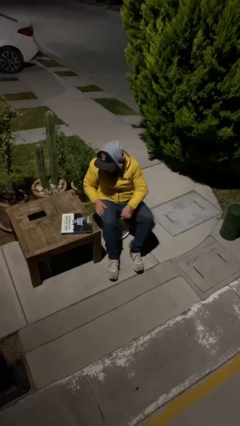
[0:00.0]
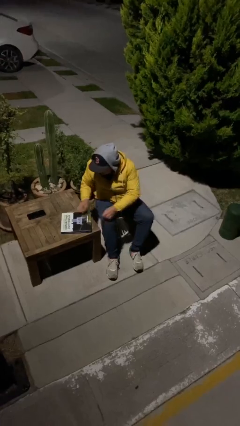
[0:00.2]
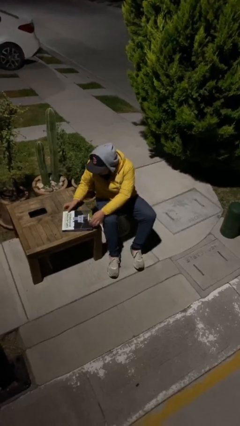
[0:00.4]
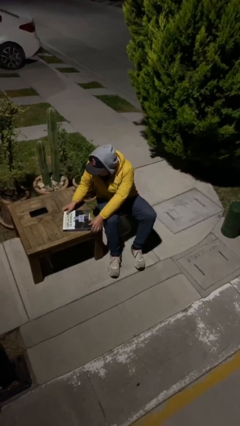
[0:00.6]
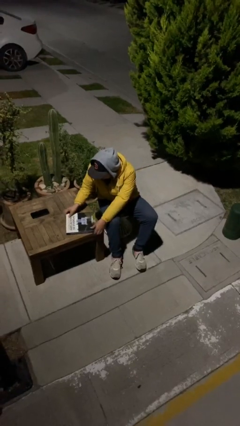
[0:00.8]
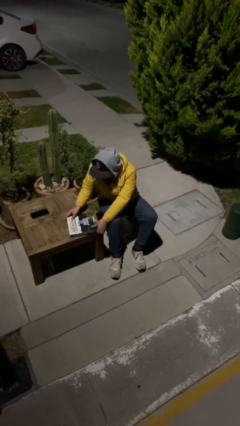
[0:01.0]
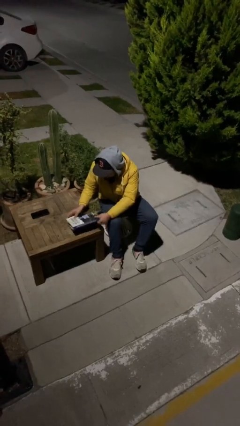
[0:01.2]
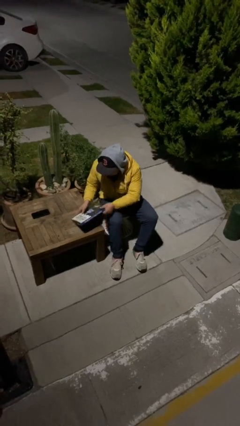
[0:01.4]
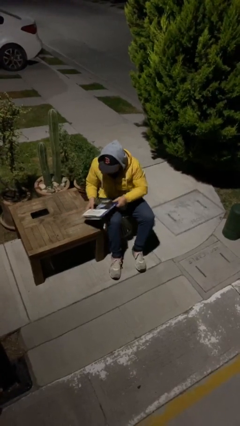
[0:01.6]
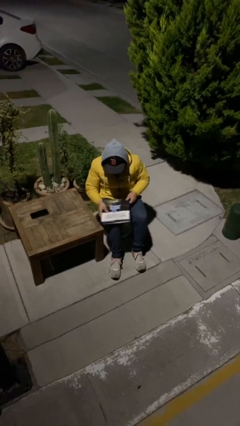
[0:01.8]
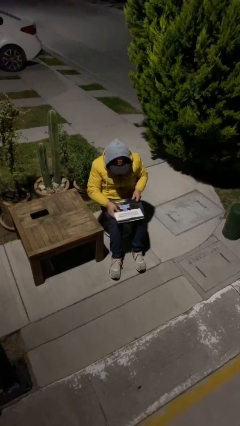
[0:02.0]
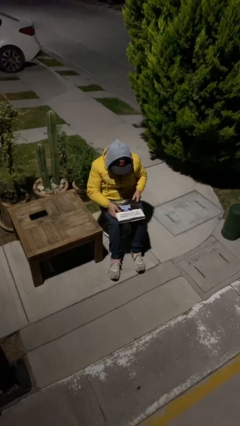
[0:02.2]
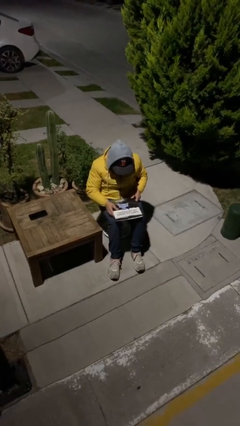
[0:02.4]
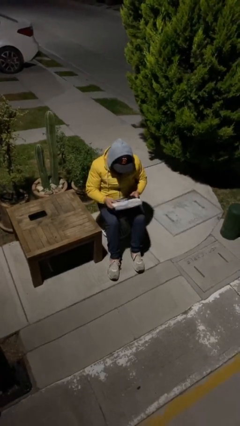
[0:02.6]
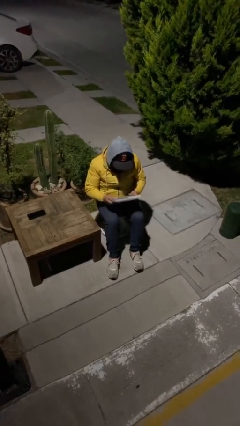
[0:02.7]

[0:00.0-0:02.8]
person picks up object from table

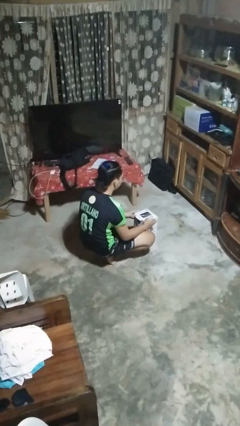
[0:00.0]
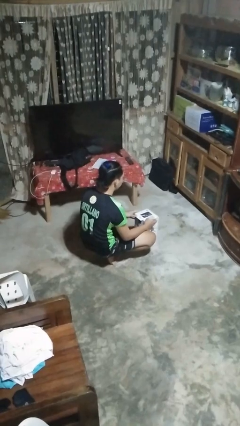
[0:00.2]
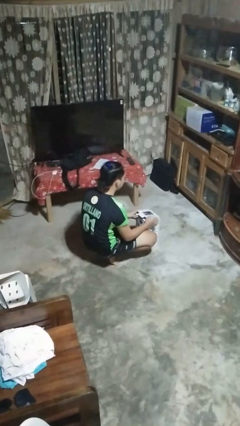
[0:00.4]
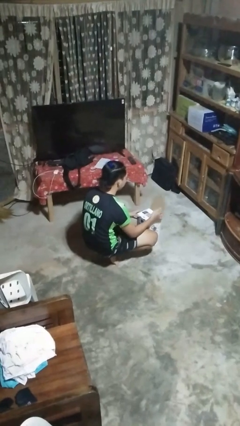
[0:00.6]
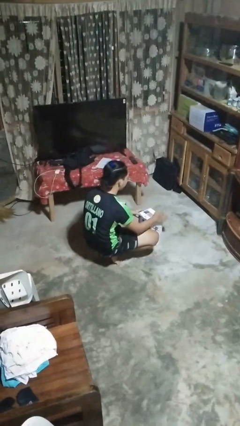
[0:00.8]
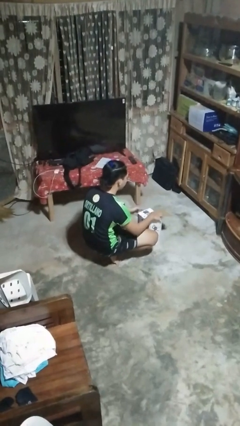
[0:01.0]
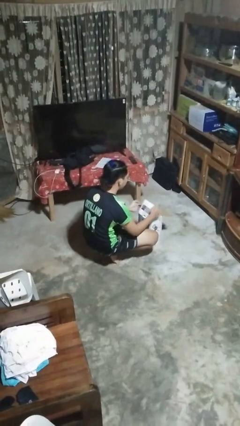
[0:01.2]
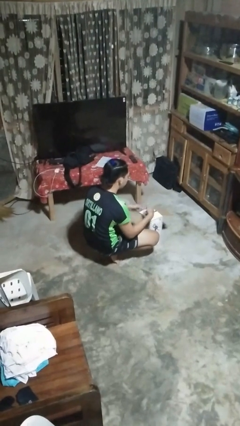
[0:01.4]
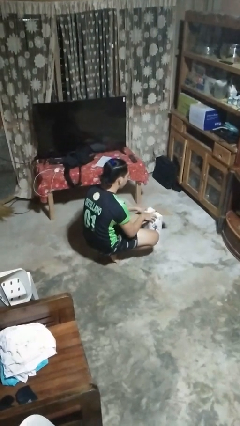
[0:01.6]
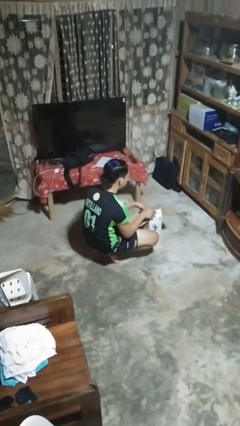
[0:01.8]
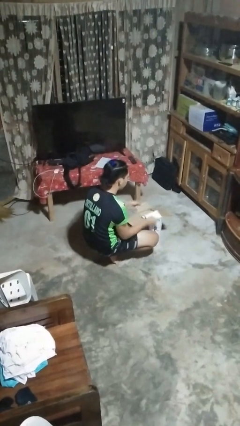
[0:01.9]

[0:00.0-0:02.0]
person opens box

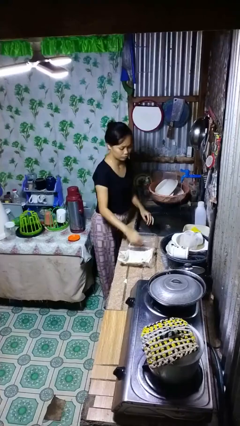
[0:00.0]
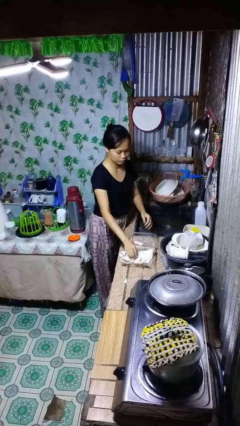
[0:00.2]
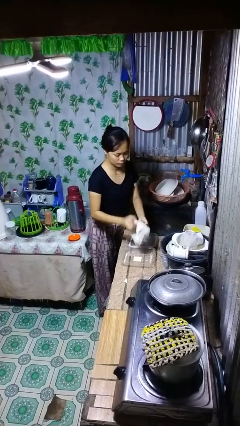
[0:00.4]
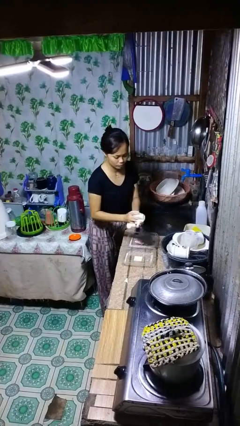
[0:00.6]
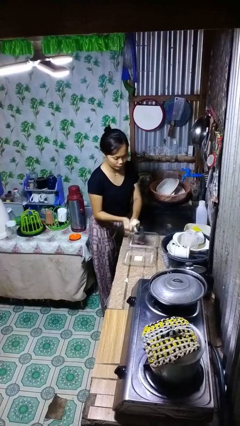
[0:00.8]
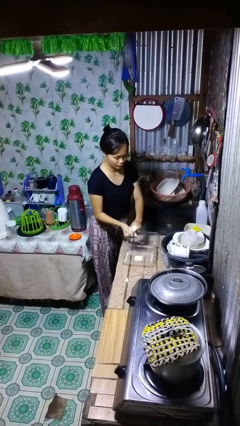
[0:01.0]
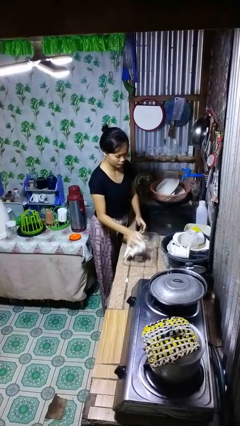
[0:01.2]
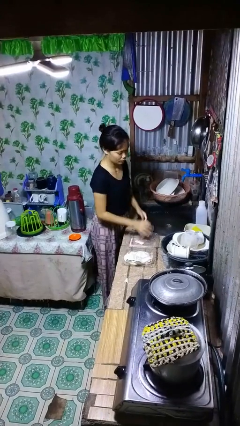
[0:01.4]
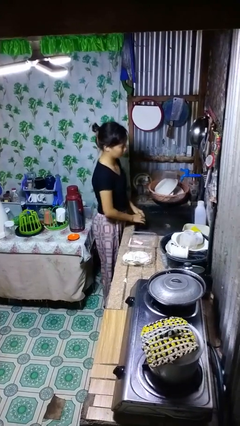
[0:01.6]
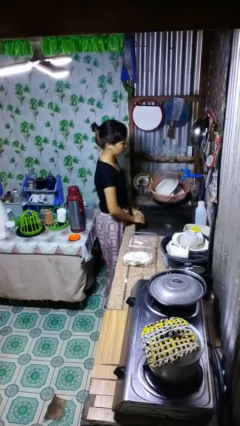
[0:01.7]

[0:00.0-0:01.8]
person dries hands with towel

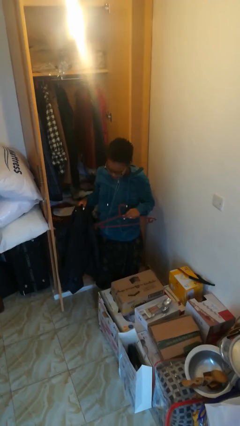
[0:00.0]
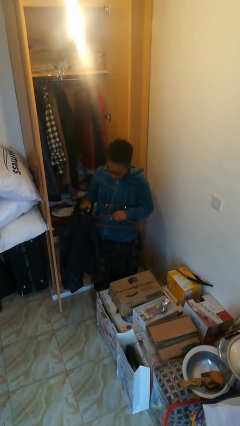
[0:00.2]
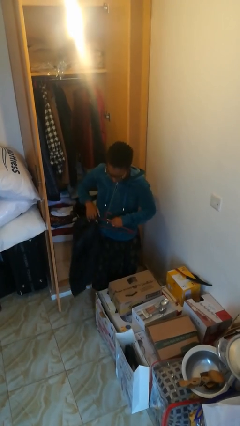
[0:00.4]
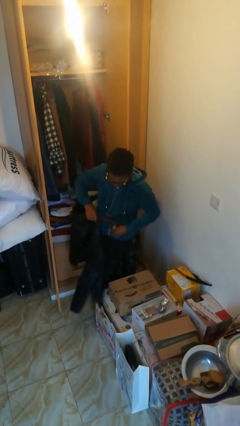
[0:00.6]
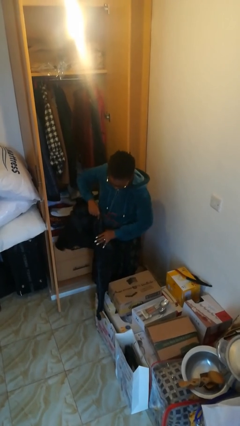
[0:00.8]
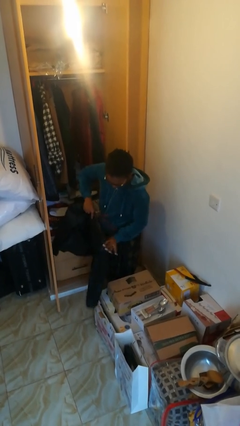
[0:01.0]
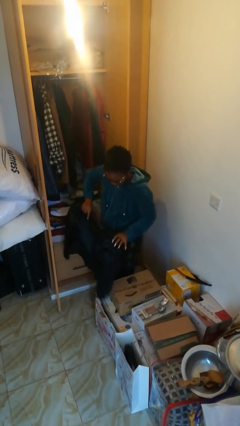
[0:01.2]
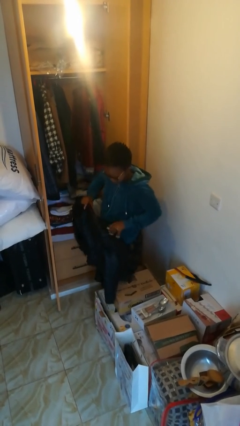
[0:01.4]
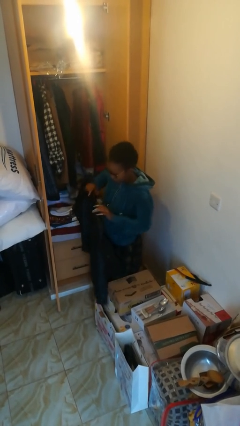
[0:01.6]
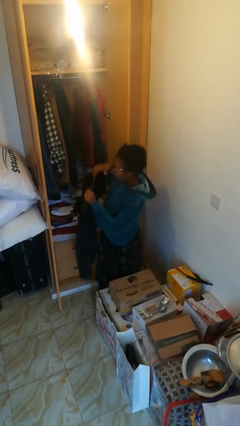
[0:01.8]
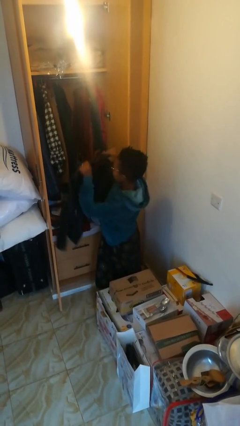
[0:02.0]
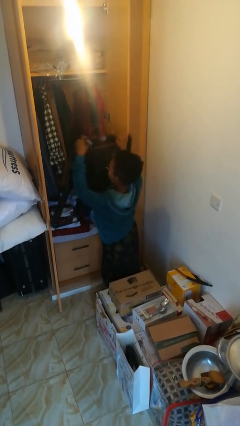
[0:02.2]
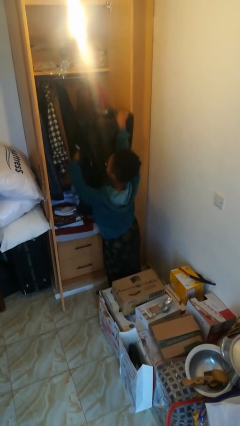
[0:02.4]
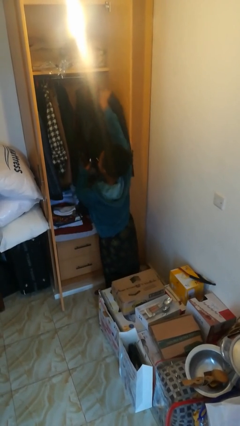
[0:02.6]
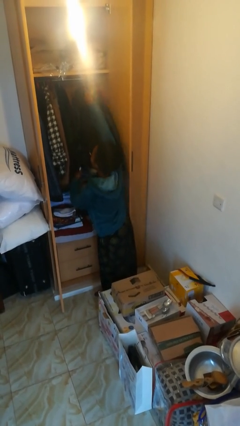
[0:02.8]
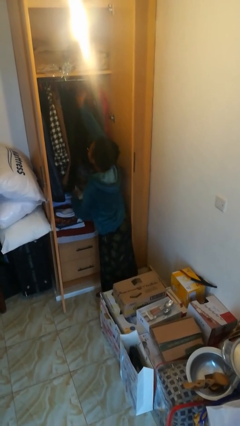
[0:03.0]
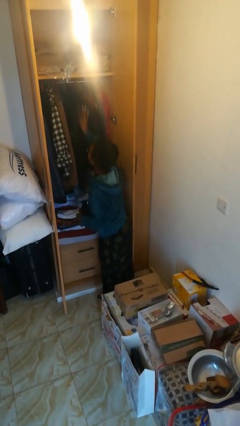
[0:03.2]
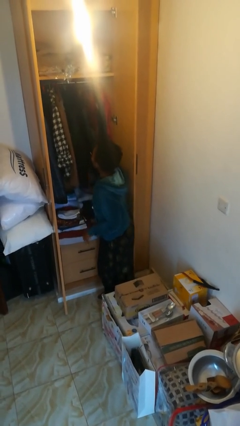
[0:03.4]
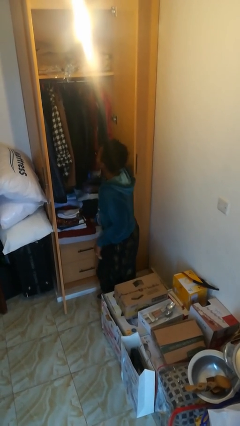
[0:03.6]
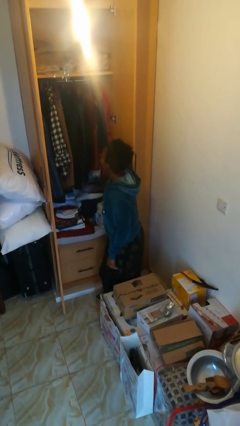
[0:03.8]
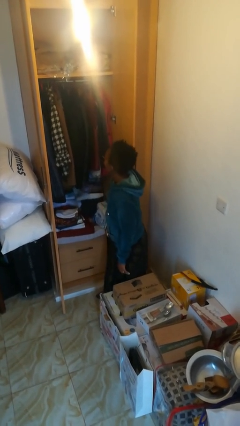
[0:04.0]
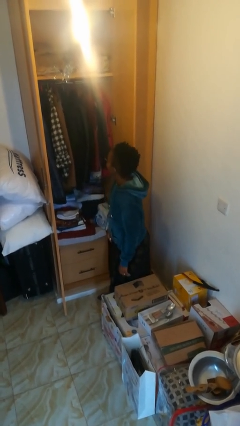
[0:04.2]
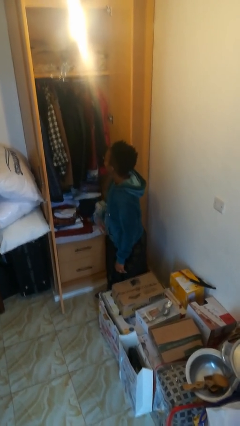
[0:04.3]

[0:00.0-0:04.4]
person puts clothes into closet

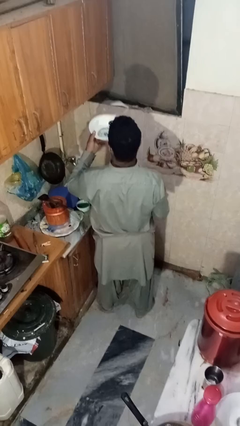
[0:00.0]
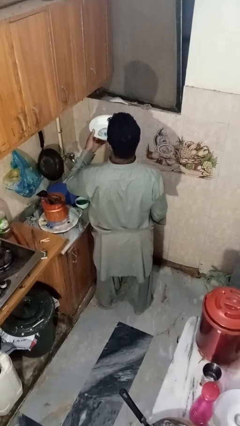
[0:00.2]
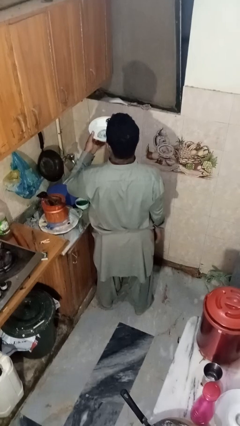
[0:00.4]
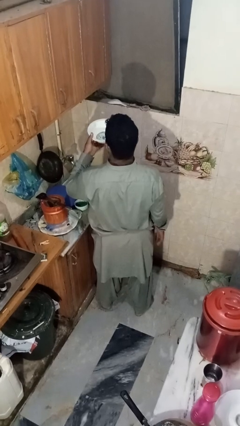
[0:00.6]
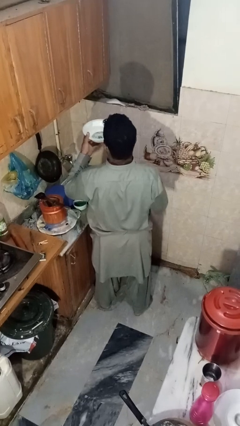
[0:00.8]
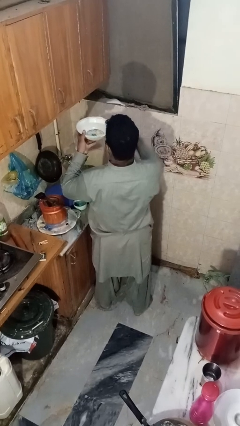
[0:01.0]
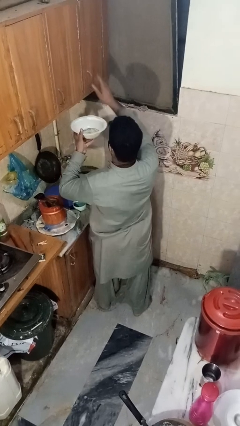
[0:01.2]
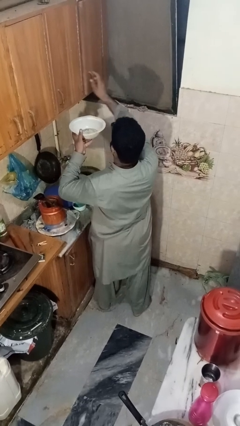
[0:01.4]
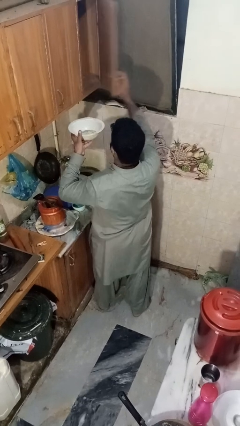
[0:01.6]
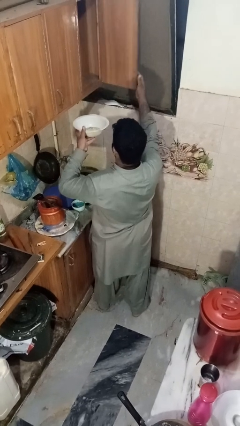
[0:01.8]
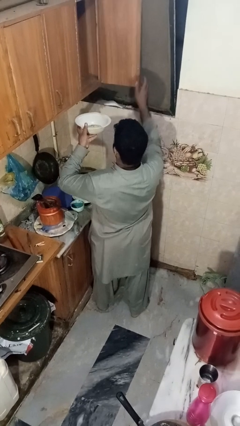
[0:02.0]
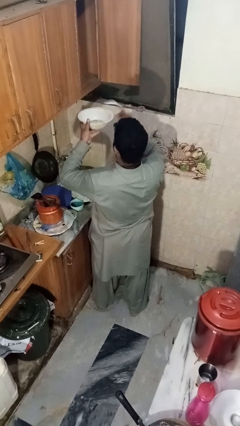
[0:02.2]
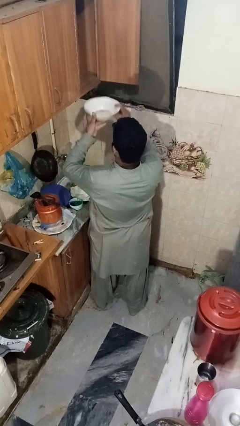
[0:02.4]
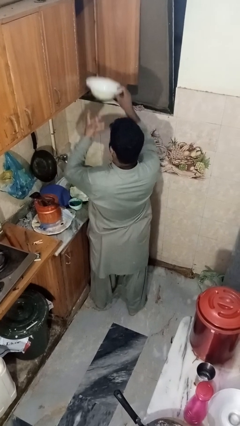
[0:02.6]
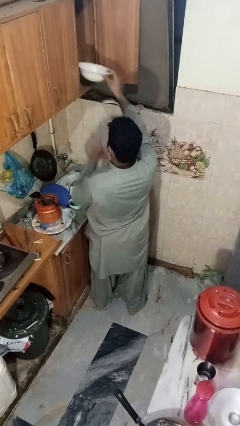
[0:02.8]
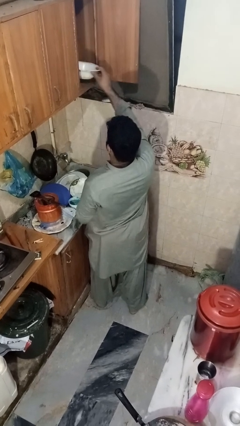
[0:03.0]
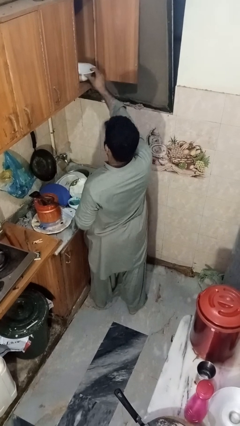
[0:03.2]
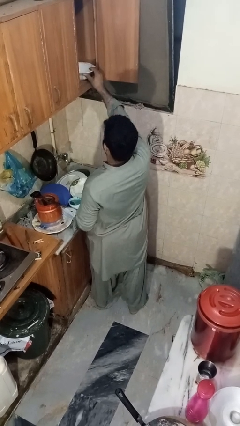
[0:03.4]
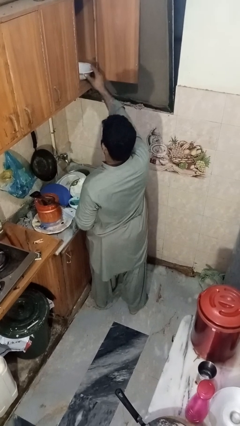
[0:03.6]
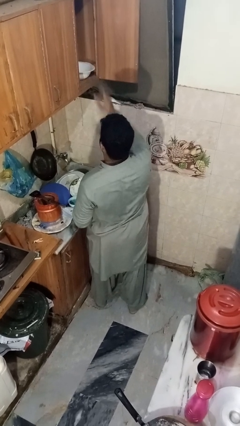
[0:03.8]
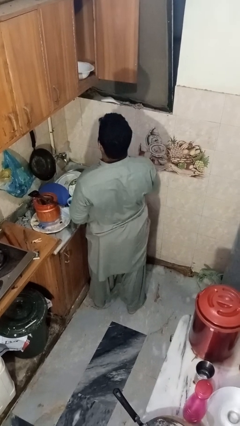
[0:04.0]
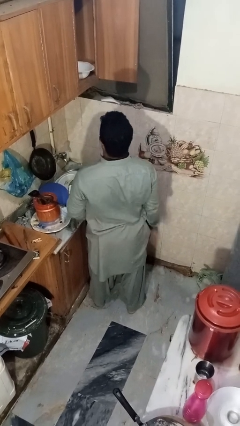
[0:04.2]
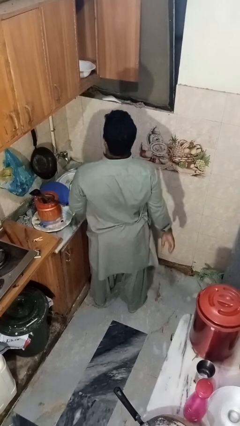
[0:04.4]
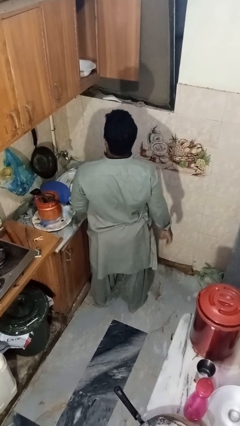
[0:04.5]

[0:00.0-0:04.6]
person puts object in cabinet

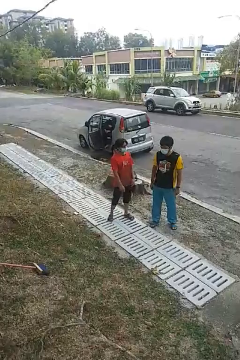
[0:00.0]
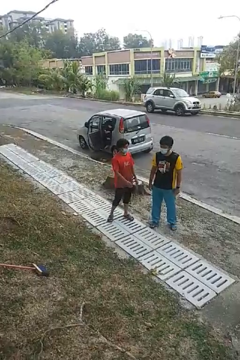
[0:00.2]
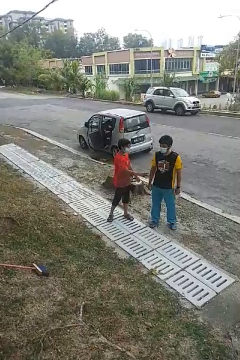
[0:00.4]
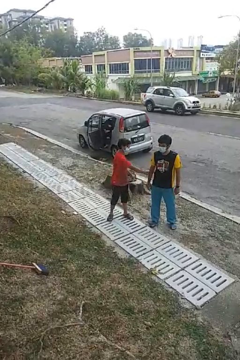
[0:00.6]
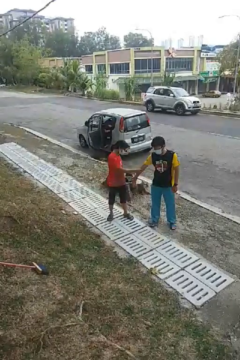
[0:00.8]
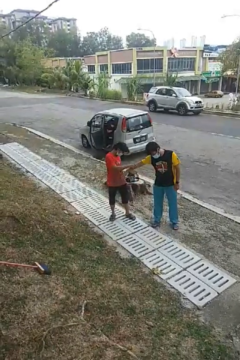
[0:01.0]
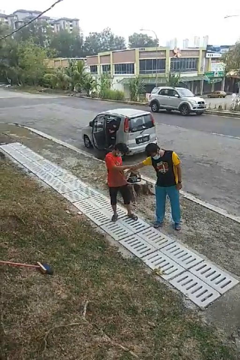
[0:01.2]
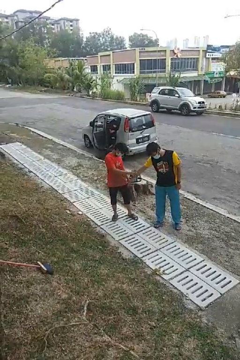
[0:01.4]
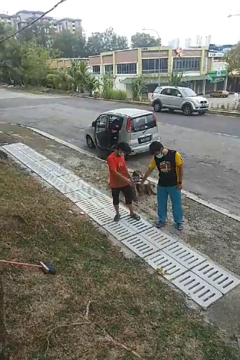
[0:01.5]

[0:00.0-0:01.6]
person grabs person by forearm

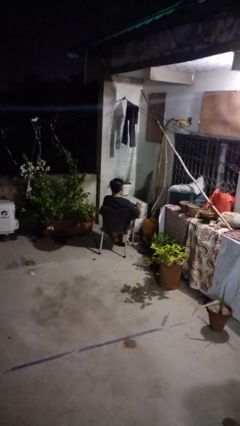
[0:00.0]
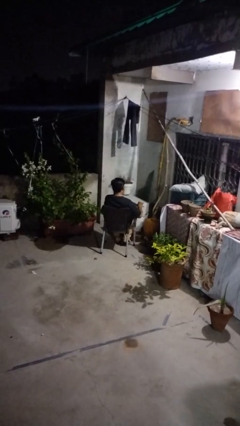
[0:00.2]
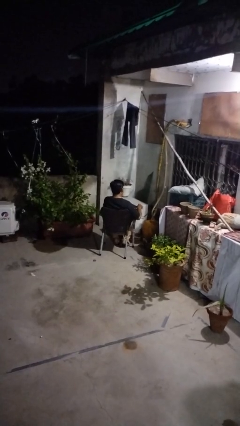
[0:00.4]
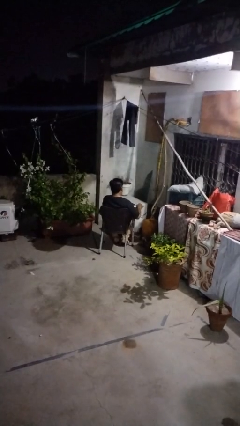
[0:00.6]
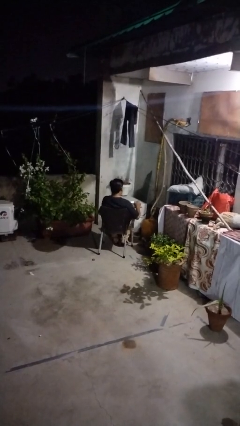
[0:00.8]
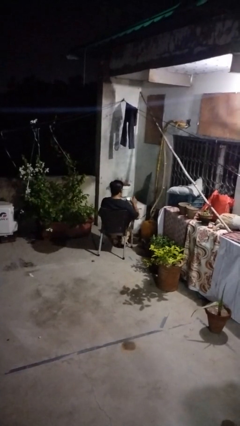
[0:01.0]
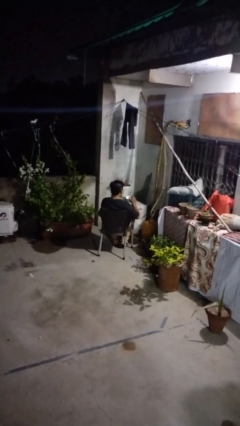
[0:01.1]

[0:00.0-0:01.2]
person drinks from mug
